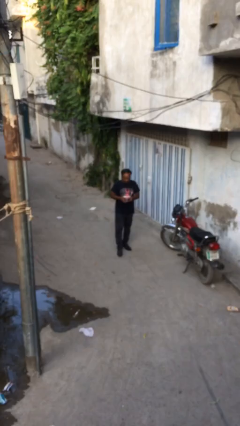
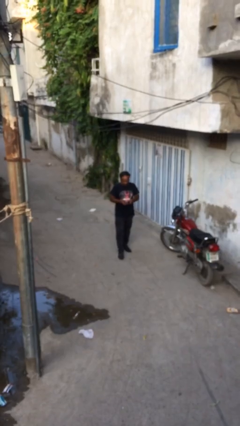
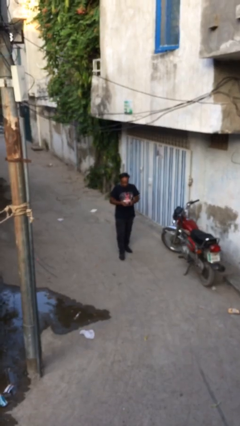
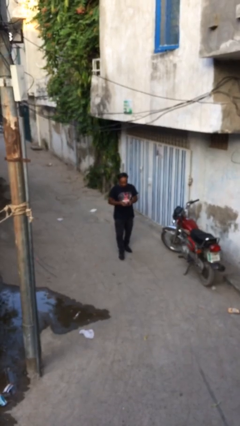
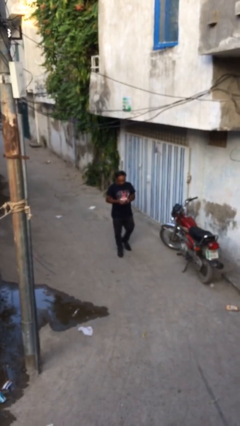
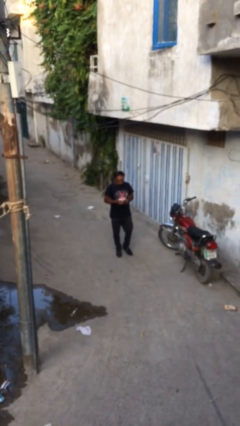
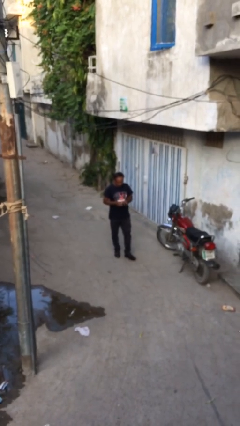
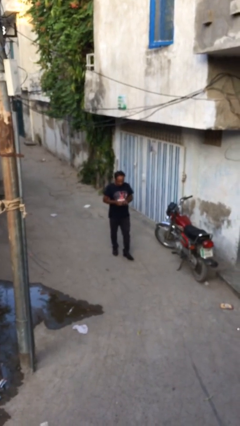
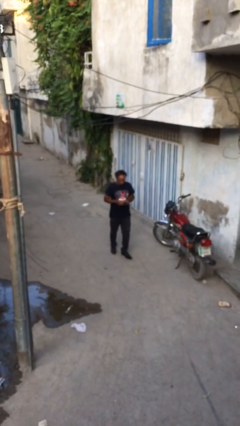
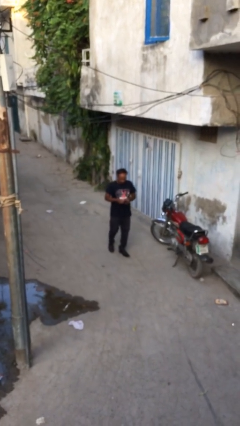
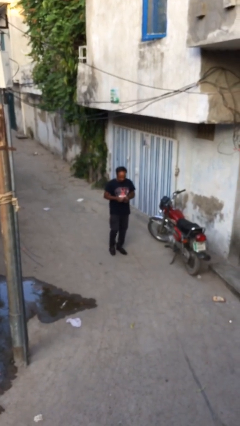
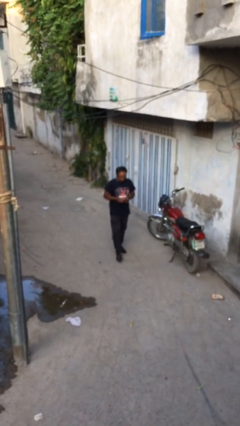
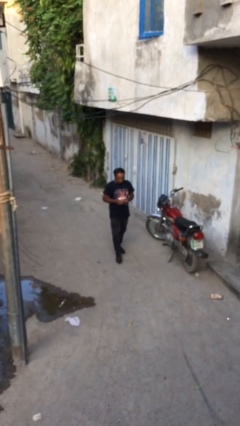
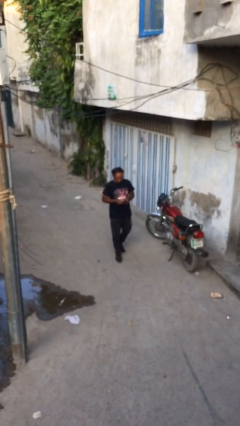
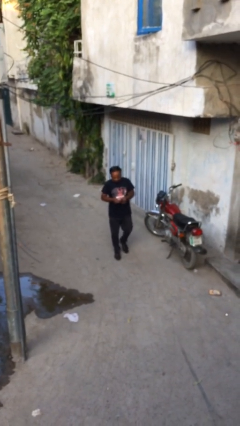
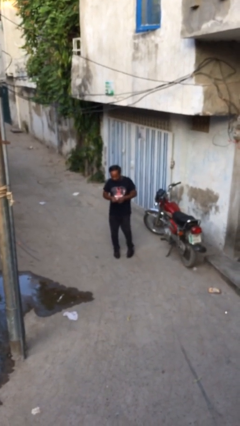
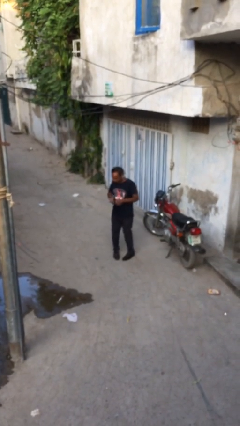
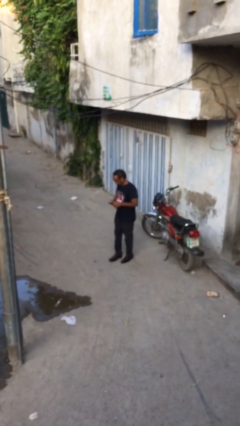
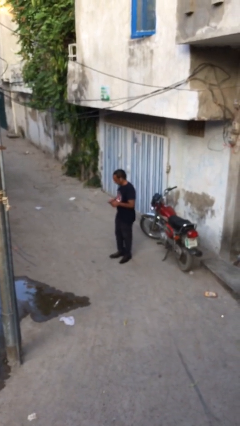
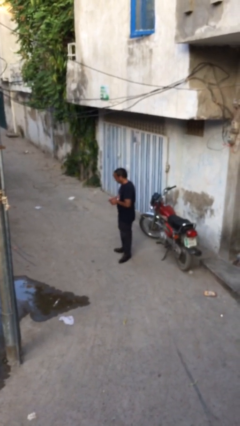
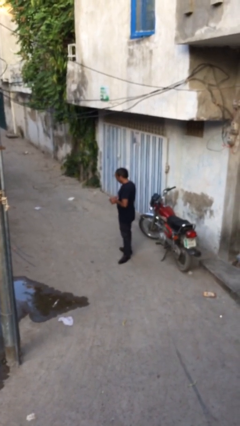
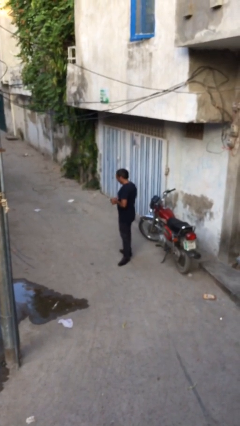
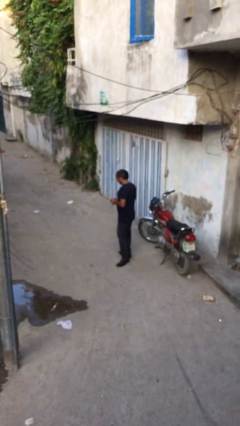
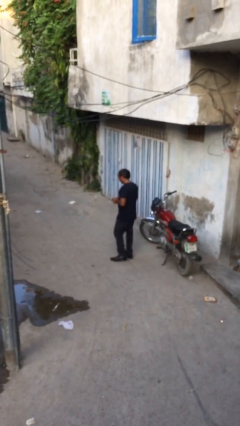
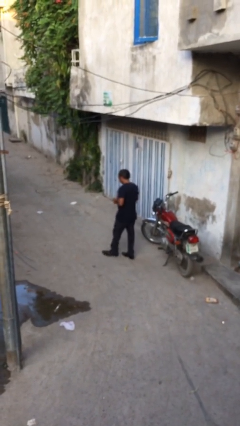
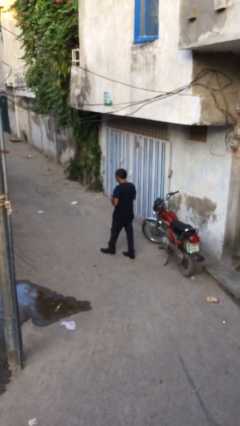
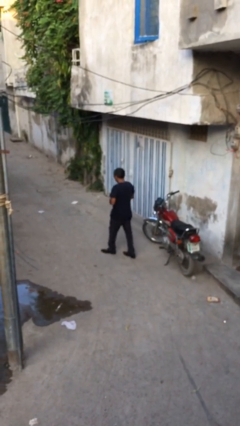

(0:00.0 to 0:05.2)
person texts on phone

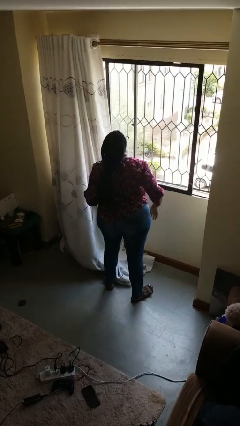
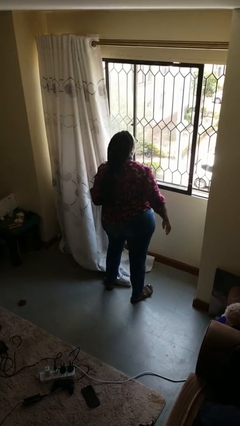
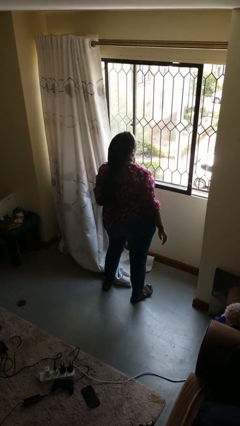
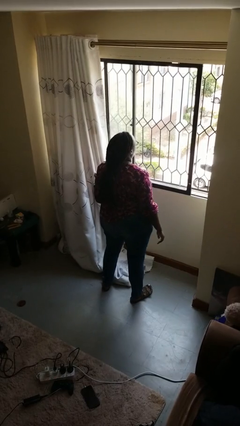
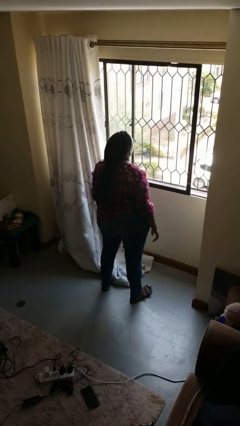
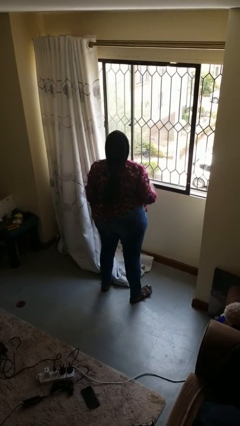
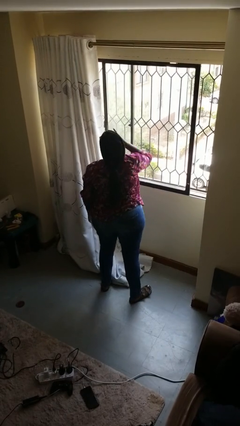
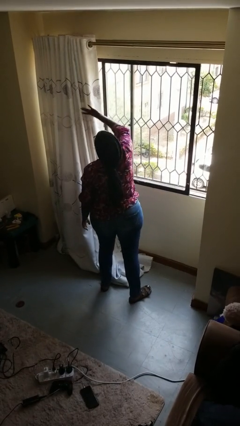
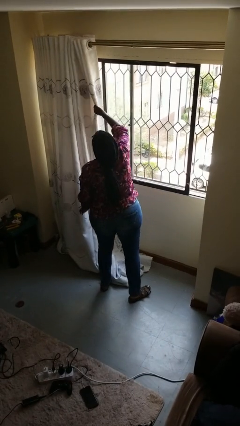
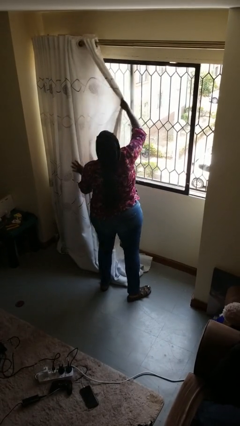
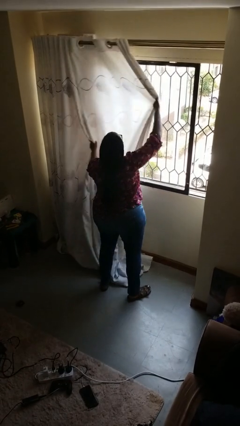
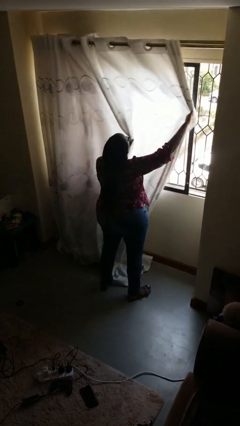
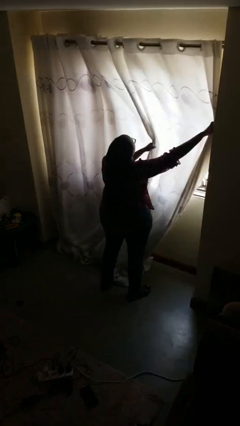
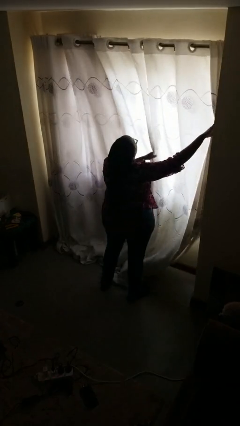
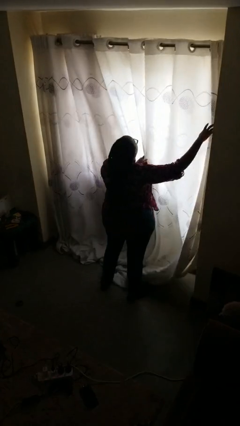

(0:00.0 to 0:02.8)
person closes curtains

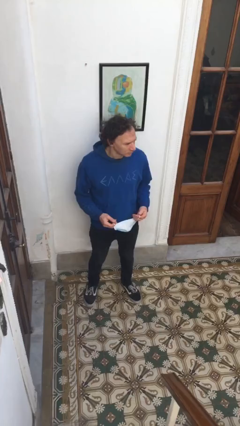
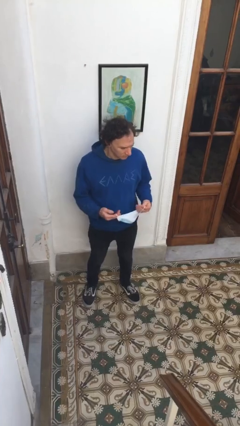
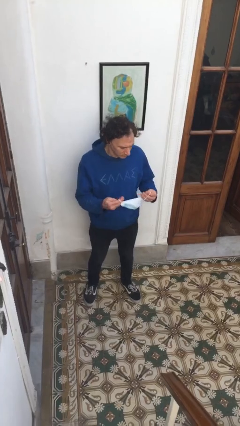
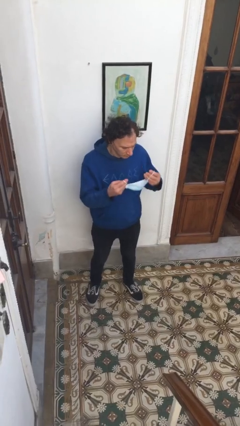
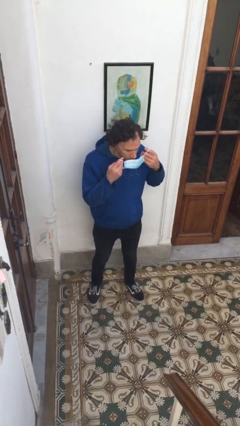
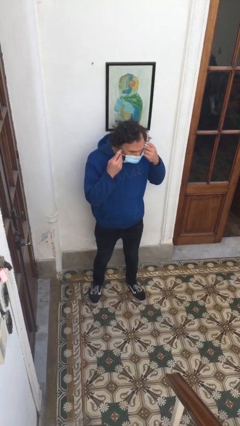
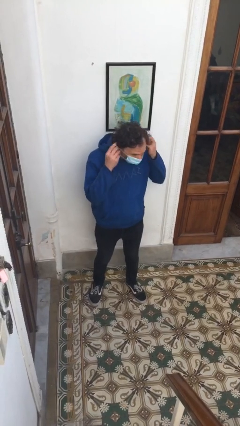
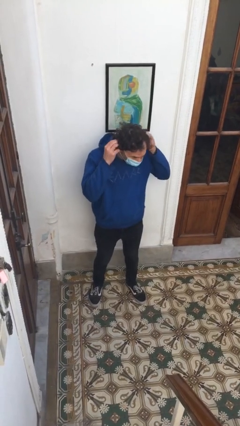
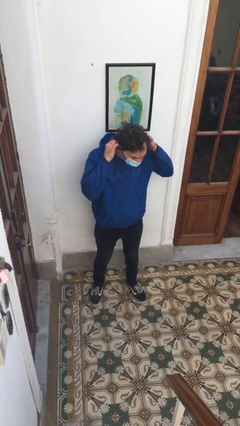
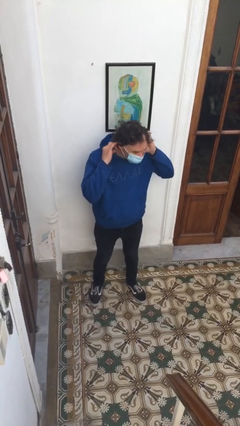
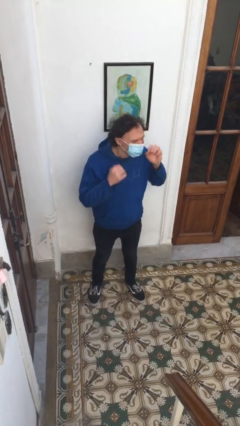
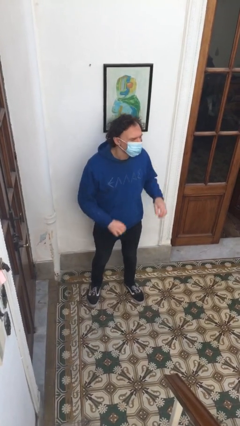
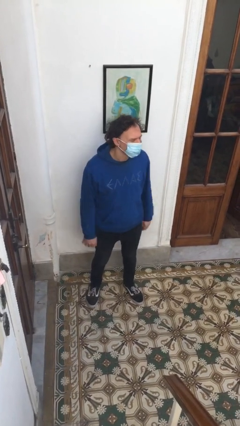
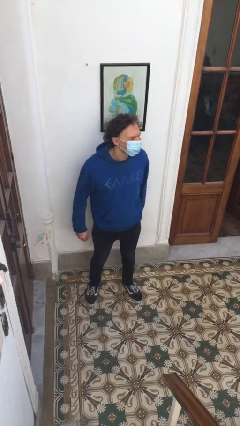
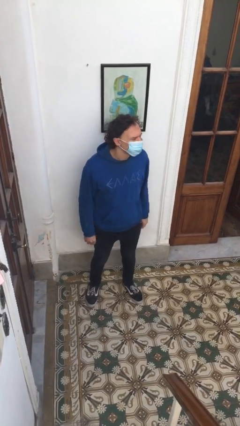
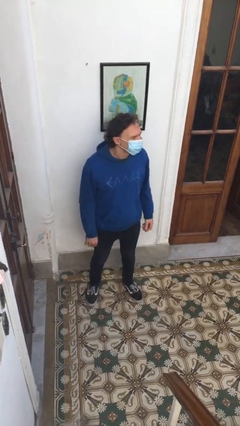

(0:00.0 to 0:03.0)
person puts on facemask

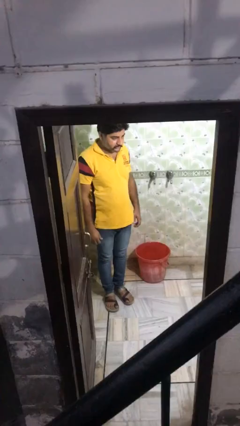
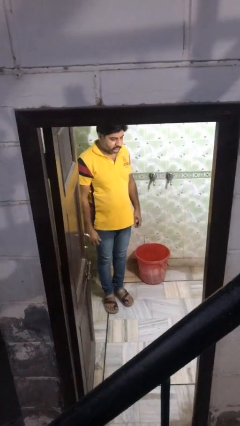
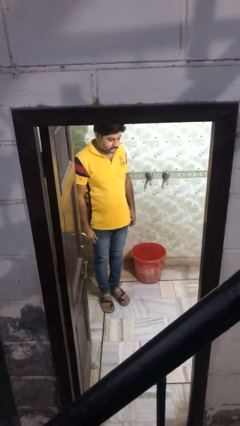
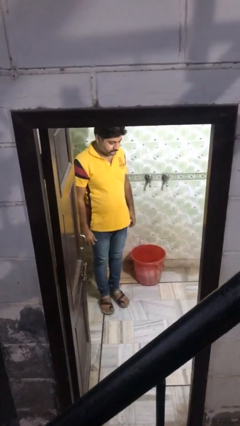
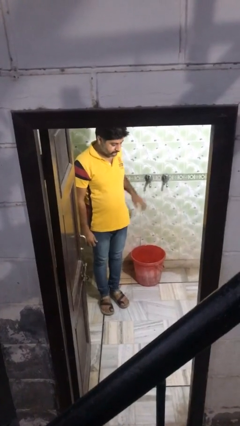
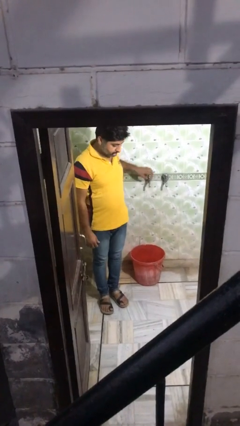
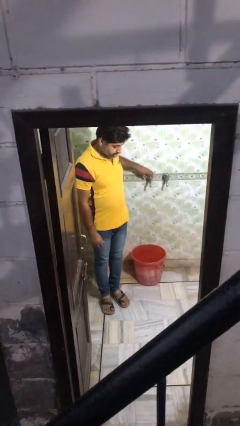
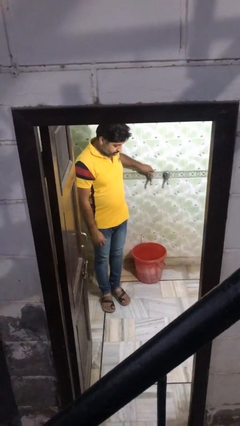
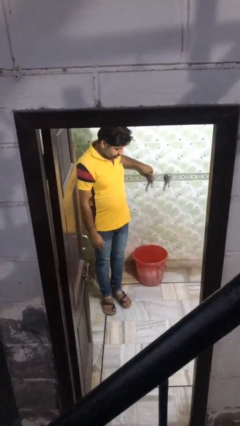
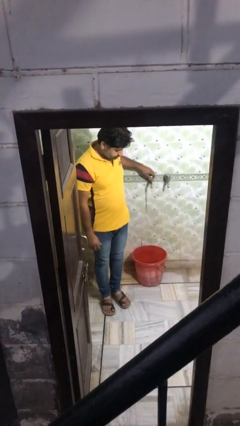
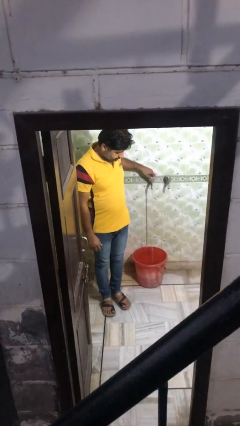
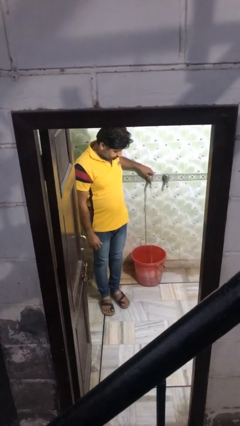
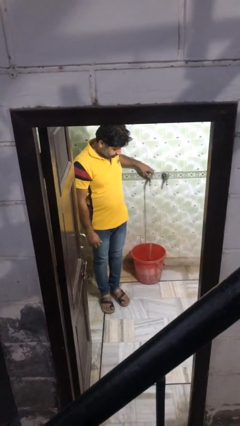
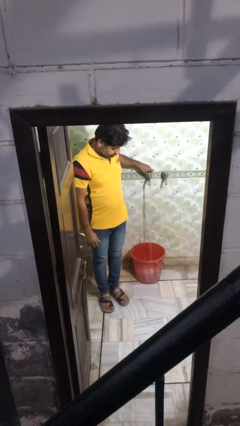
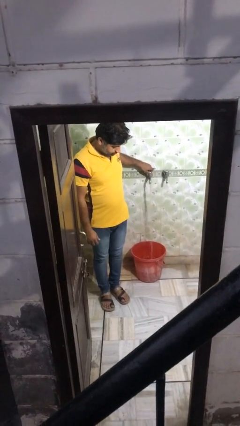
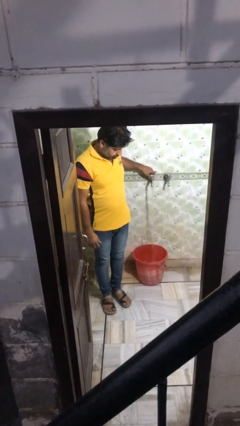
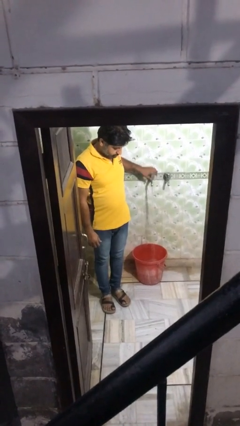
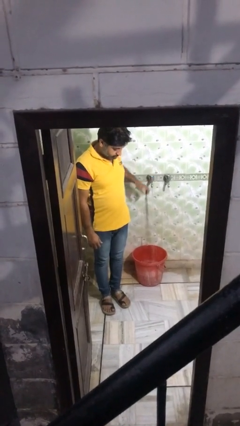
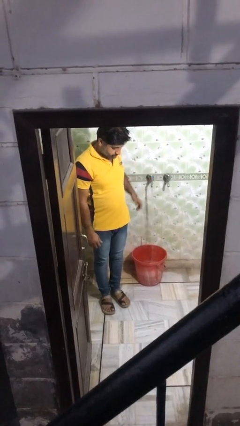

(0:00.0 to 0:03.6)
person turns on faucet

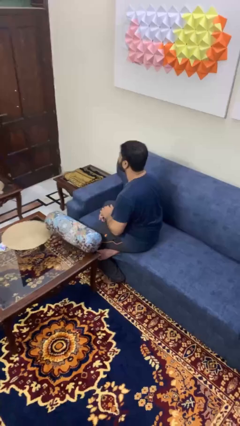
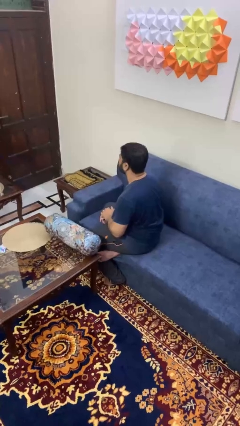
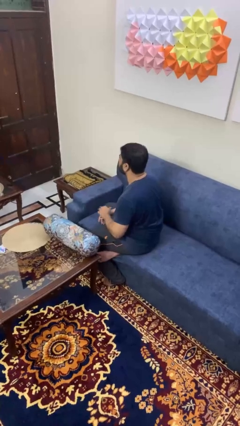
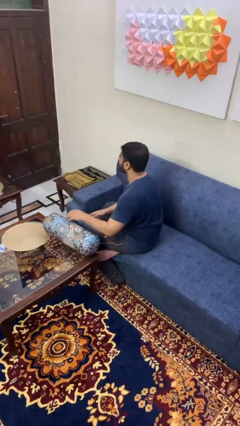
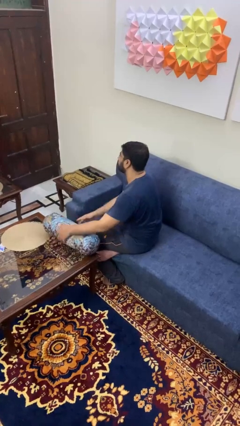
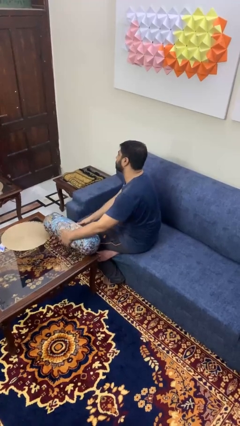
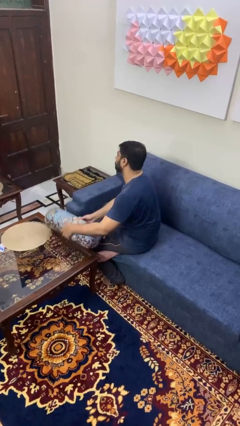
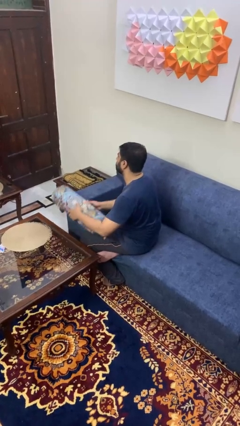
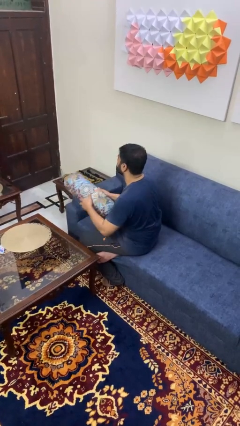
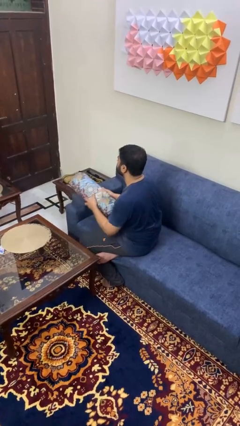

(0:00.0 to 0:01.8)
person picks up object from table

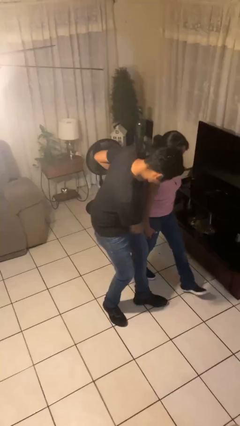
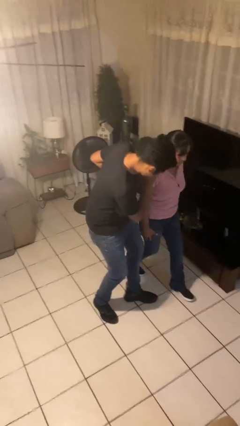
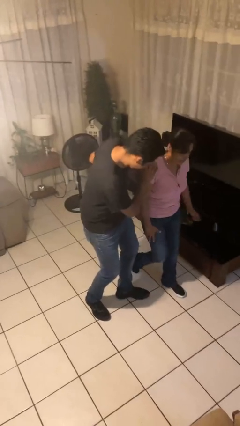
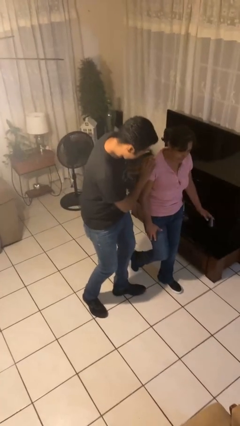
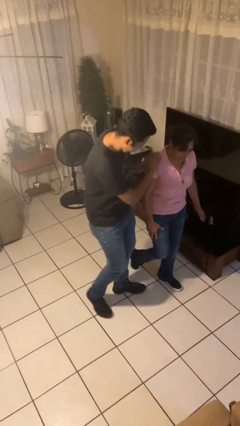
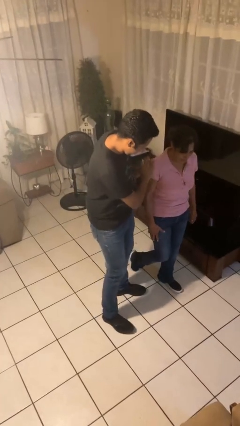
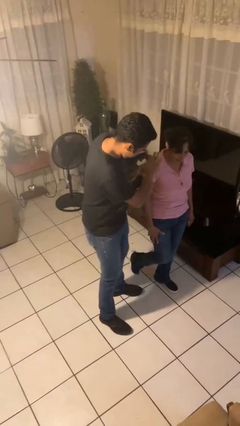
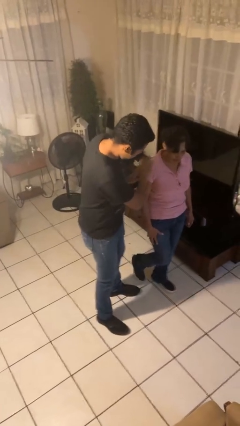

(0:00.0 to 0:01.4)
person bumps into person
